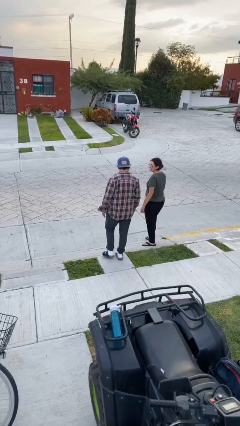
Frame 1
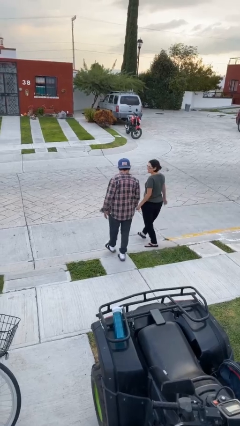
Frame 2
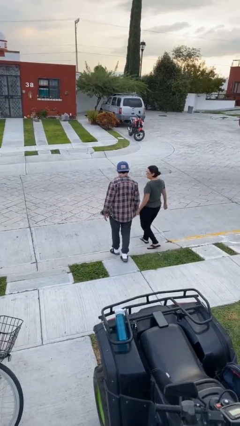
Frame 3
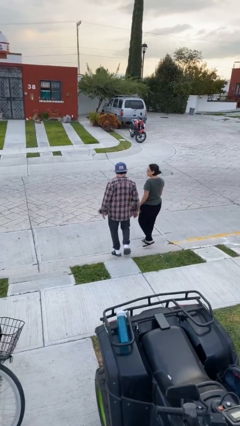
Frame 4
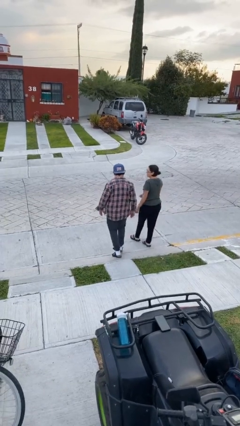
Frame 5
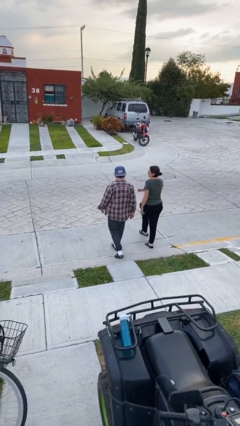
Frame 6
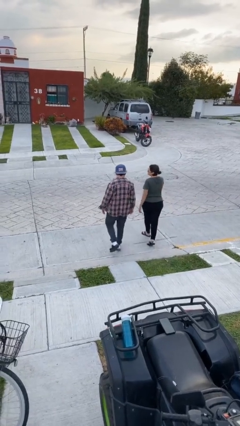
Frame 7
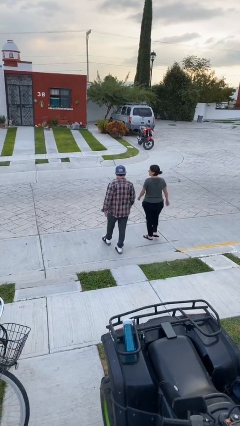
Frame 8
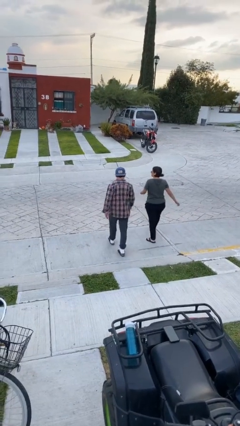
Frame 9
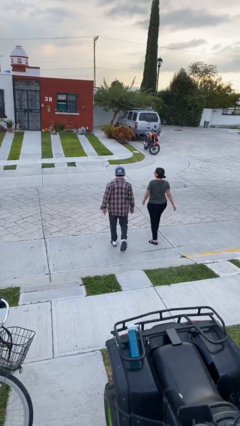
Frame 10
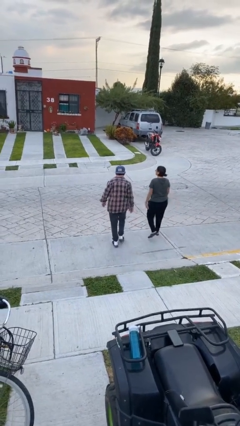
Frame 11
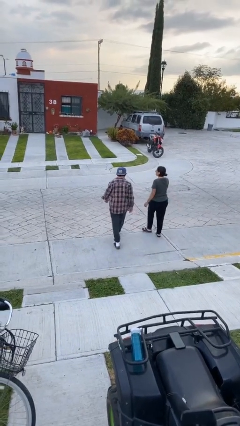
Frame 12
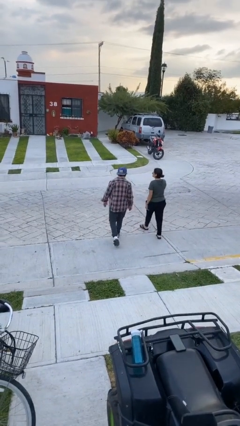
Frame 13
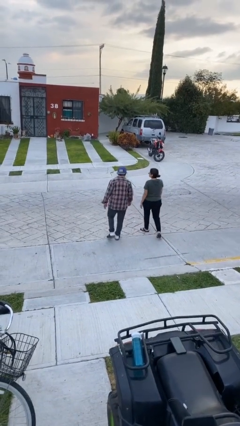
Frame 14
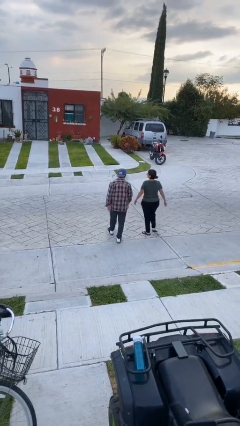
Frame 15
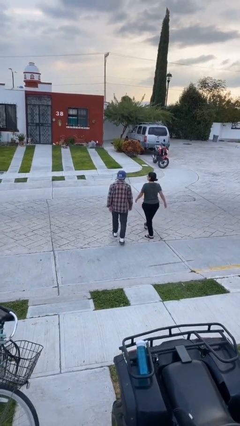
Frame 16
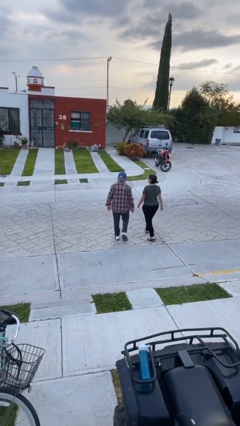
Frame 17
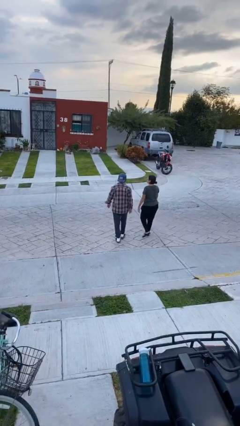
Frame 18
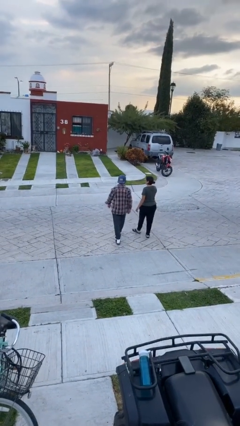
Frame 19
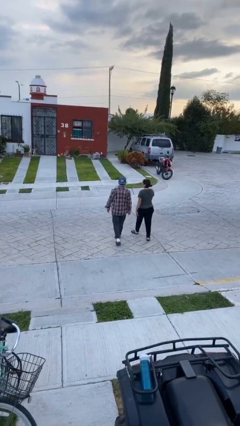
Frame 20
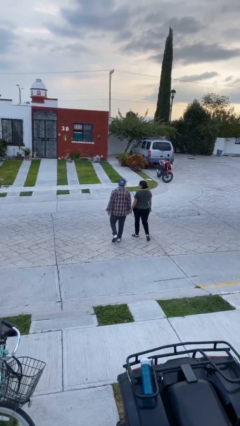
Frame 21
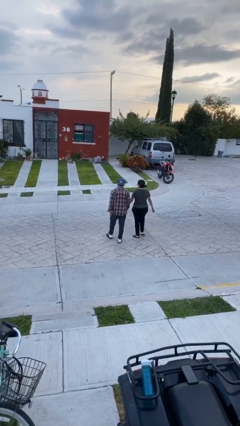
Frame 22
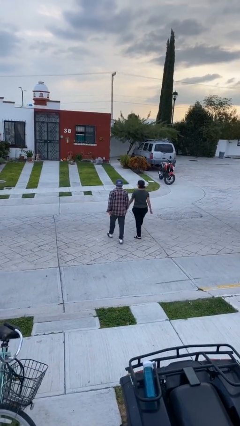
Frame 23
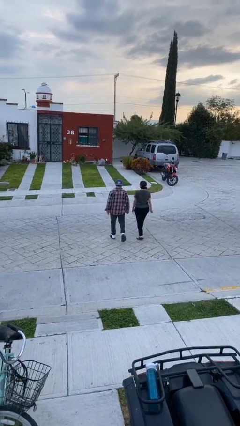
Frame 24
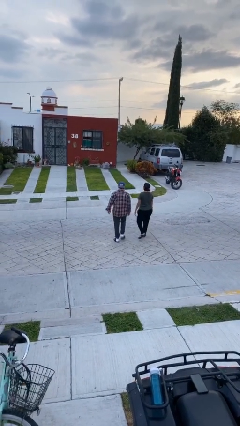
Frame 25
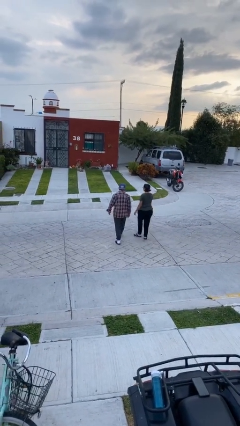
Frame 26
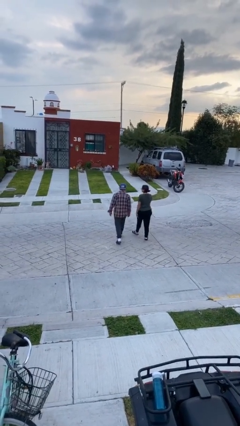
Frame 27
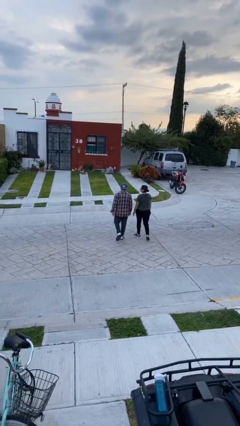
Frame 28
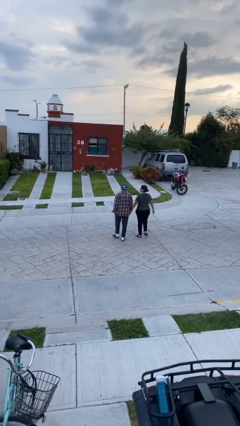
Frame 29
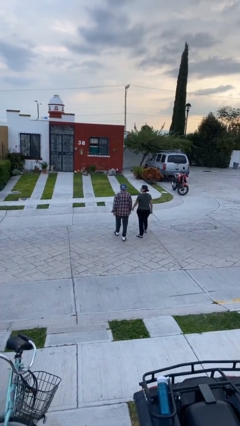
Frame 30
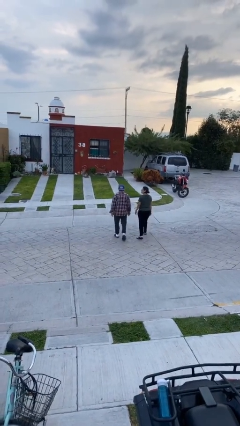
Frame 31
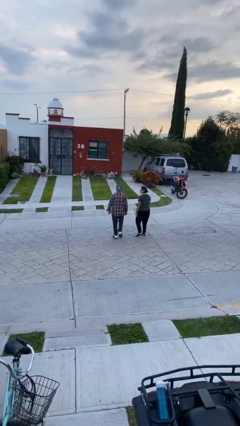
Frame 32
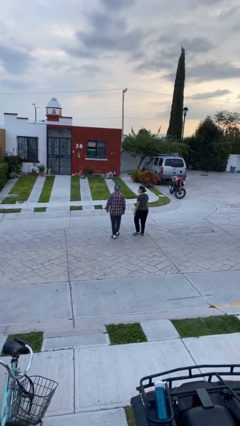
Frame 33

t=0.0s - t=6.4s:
person talks to person

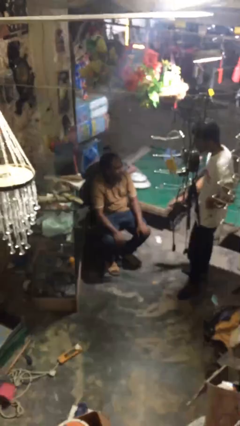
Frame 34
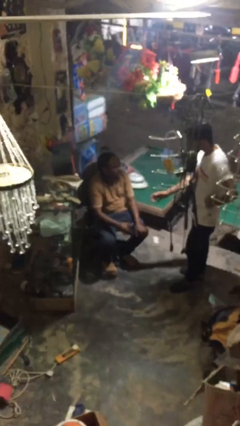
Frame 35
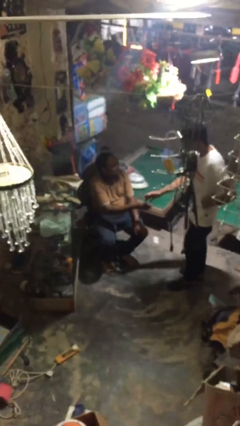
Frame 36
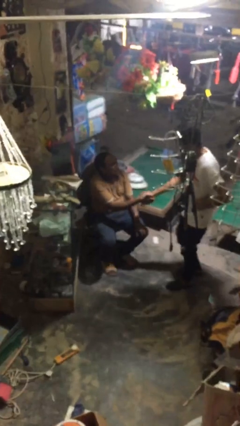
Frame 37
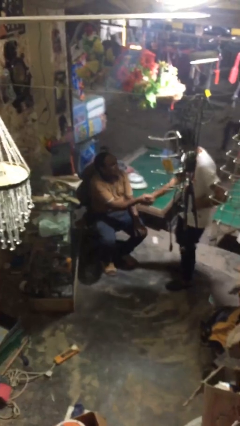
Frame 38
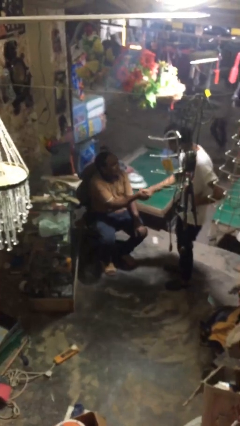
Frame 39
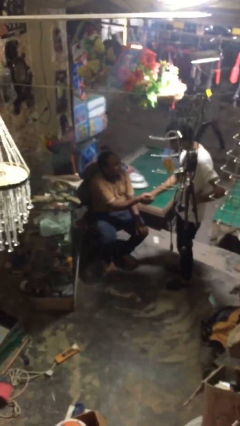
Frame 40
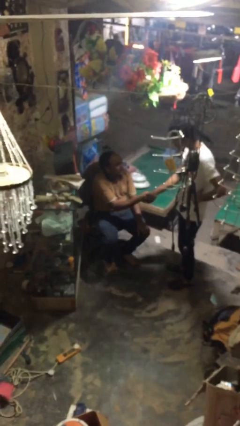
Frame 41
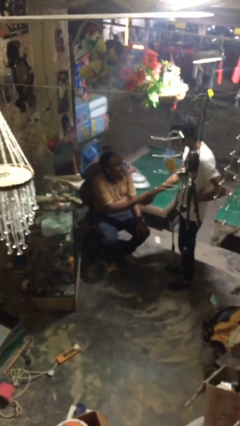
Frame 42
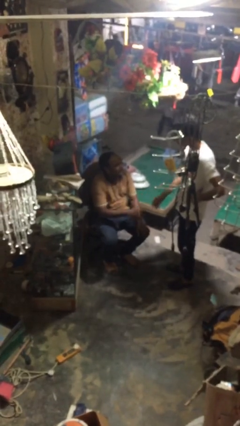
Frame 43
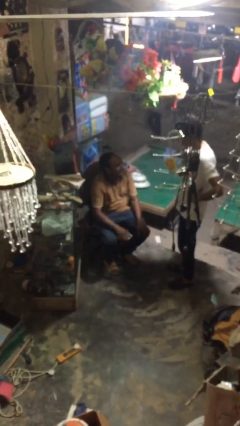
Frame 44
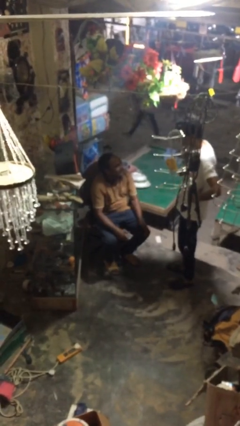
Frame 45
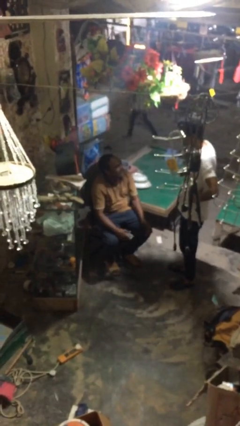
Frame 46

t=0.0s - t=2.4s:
person shakes hand

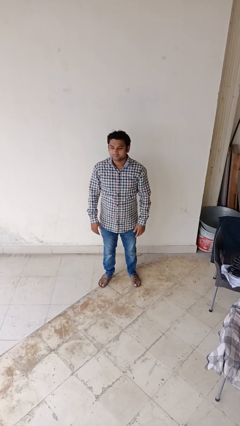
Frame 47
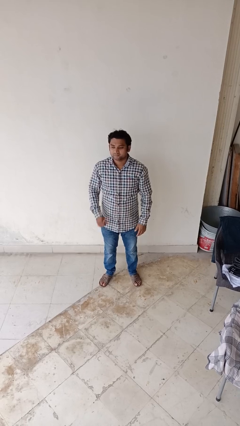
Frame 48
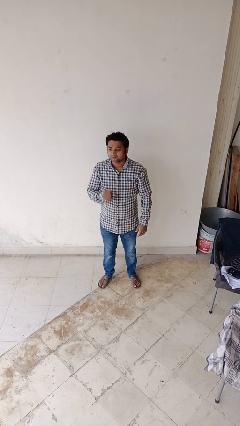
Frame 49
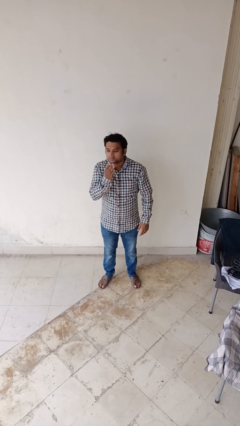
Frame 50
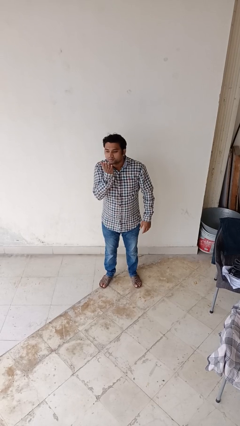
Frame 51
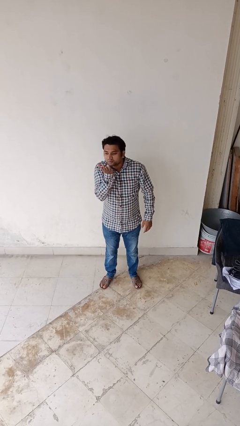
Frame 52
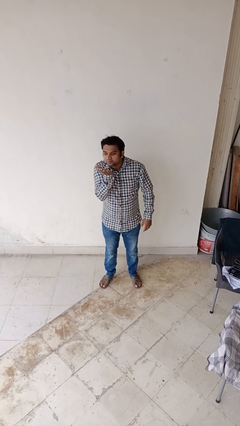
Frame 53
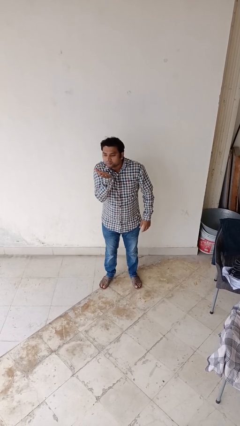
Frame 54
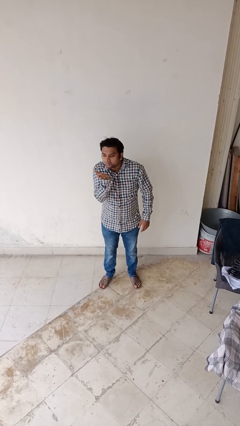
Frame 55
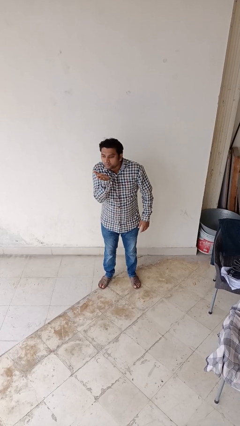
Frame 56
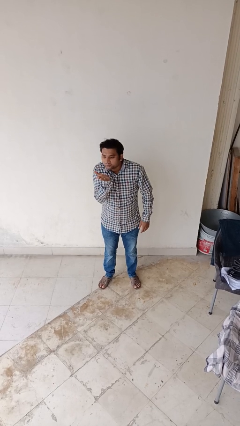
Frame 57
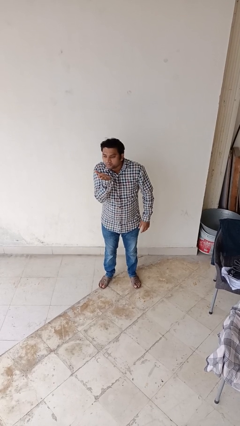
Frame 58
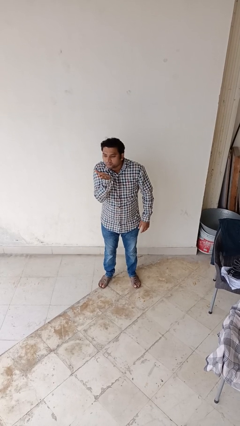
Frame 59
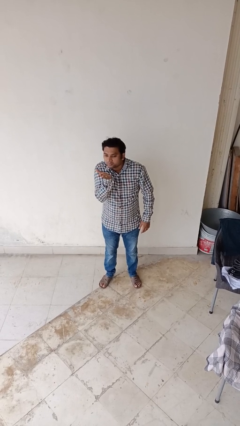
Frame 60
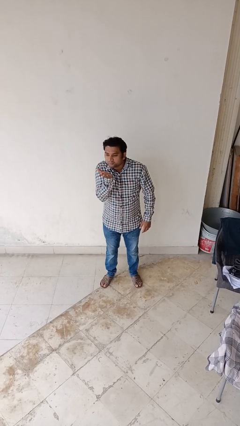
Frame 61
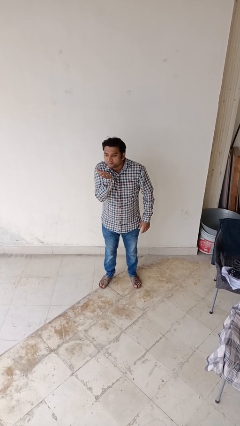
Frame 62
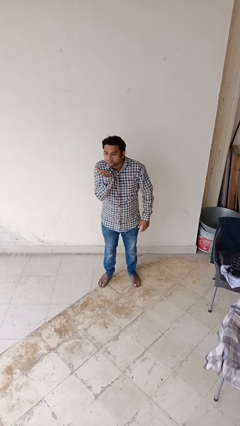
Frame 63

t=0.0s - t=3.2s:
person gestures blow kiss

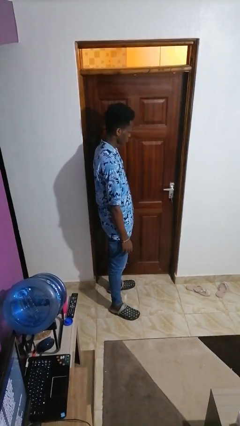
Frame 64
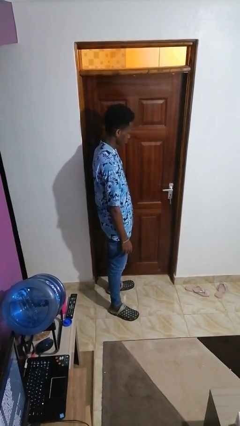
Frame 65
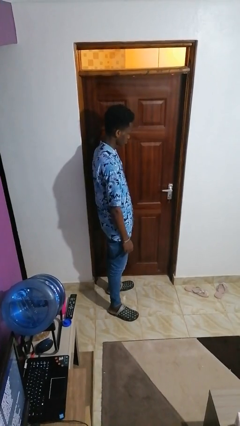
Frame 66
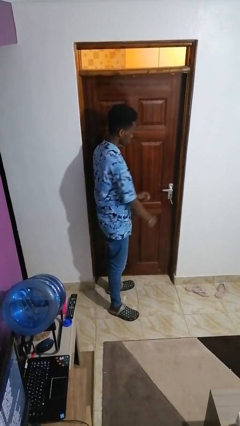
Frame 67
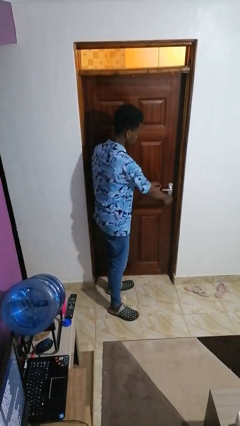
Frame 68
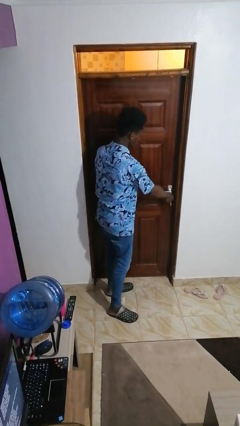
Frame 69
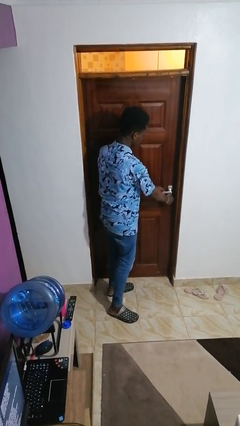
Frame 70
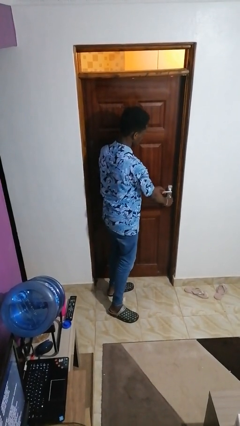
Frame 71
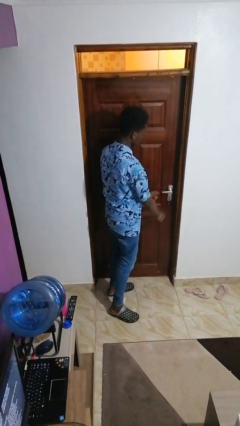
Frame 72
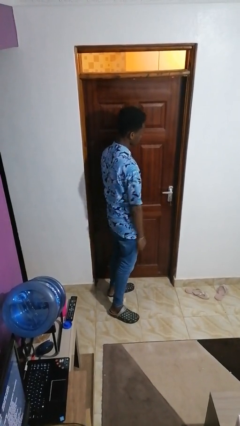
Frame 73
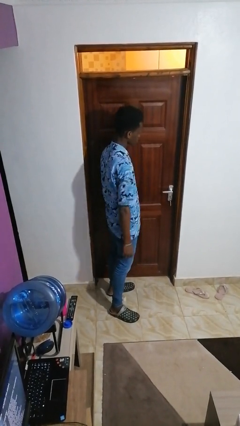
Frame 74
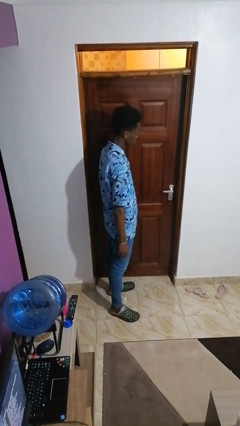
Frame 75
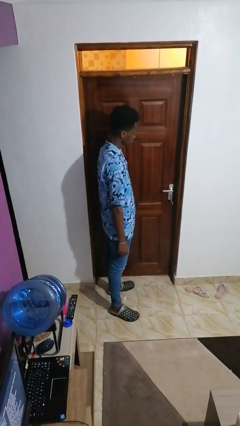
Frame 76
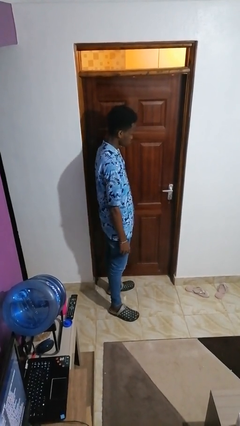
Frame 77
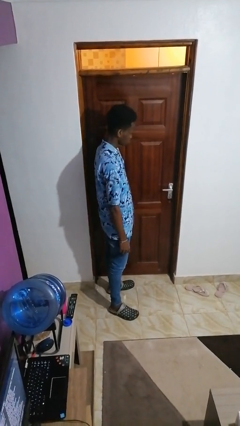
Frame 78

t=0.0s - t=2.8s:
person unlocks door with keys

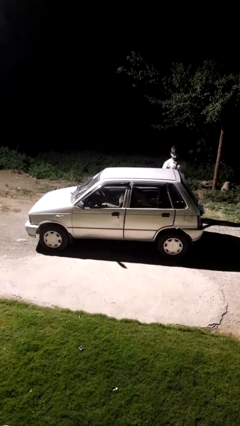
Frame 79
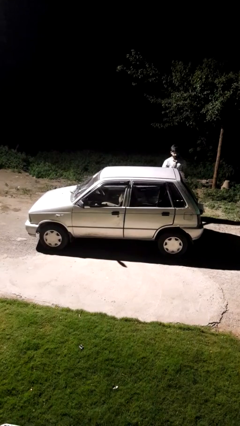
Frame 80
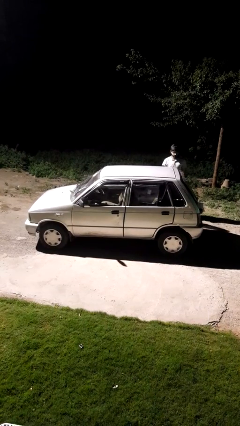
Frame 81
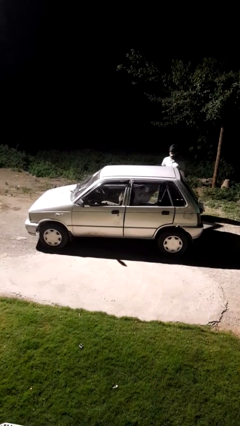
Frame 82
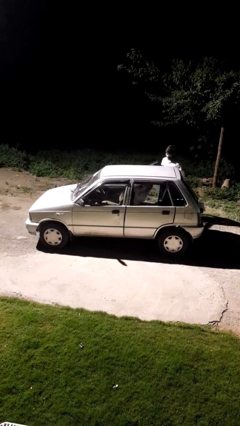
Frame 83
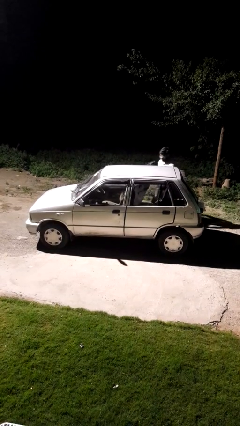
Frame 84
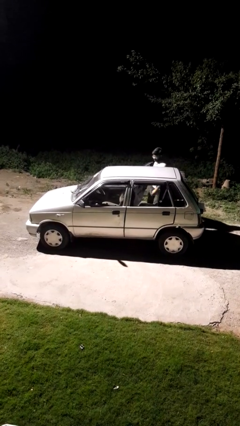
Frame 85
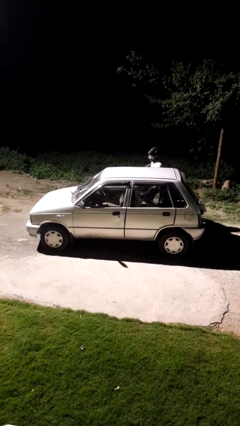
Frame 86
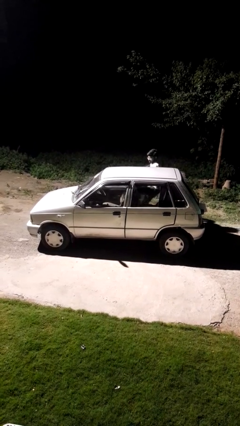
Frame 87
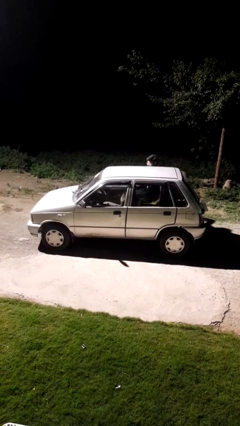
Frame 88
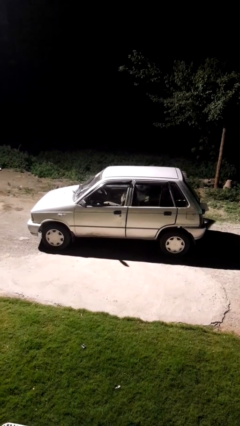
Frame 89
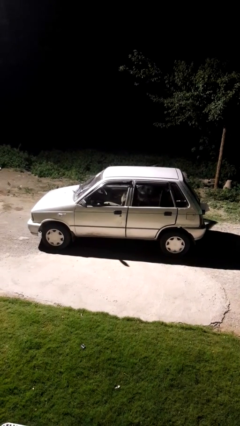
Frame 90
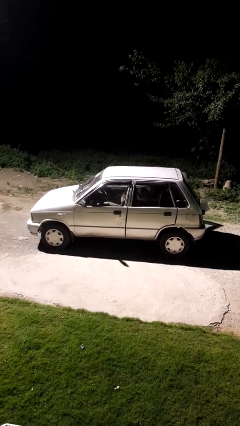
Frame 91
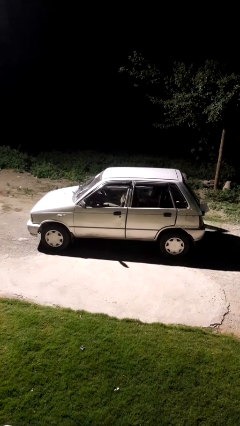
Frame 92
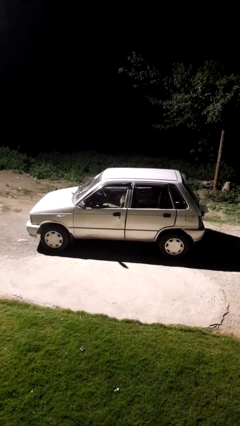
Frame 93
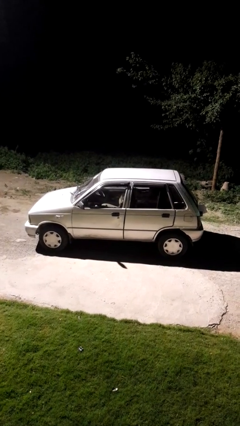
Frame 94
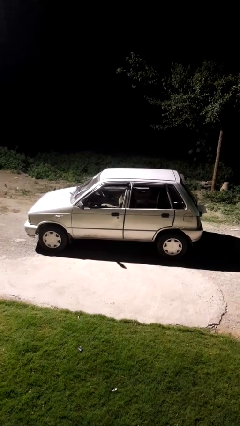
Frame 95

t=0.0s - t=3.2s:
car picks up person
